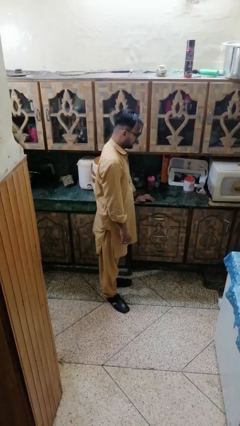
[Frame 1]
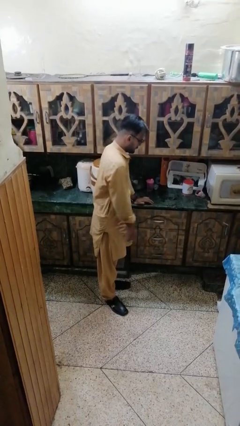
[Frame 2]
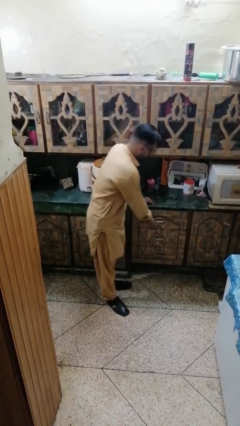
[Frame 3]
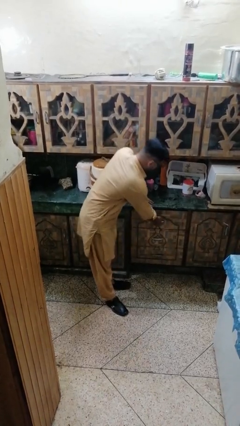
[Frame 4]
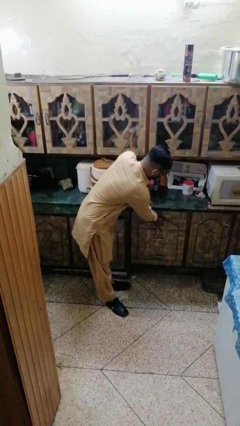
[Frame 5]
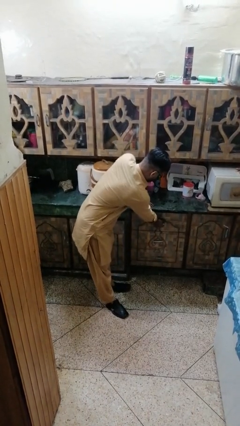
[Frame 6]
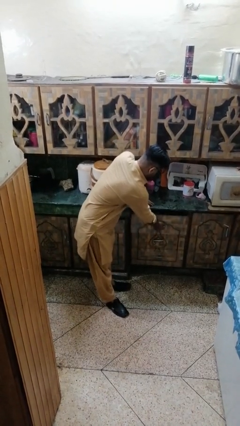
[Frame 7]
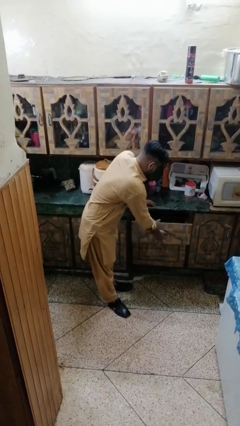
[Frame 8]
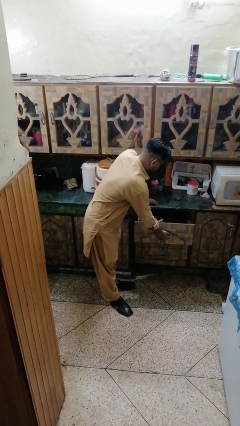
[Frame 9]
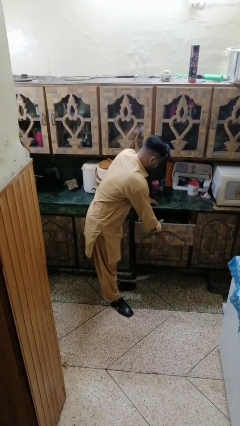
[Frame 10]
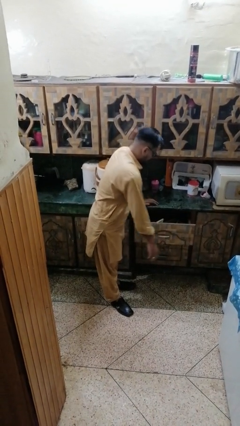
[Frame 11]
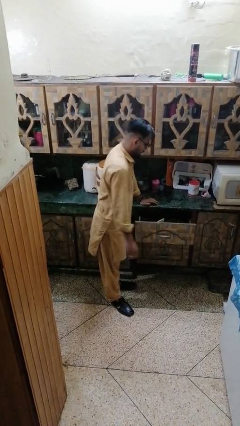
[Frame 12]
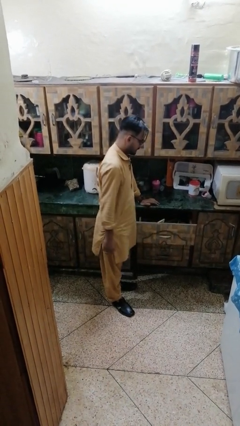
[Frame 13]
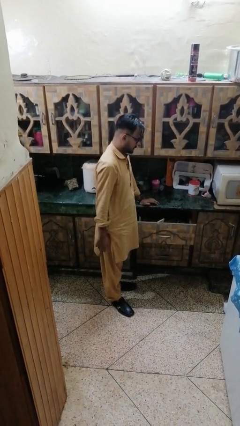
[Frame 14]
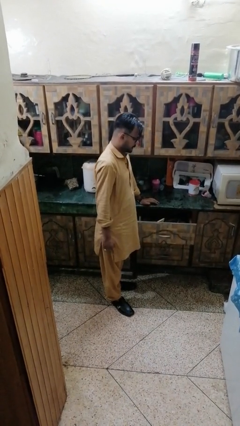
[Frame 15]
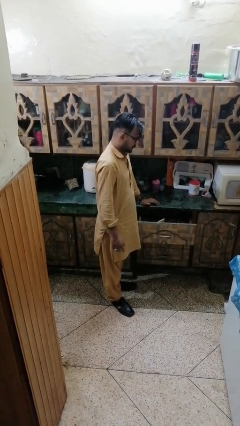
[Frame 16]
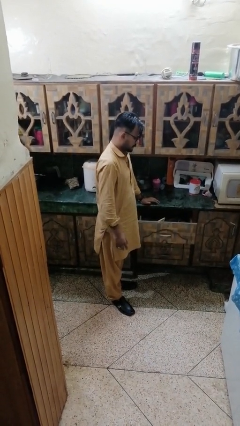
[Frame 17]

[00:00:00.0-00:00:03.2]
person opens kitchen drawer

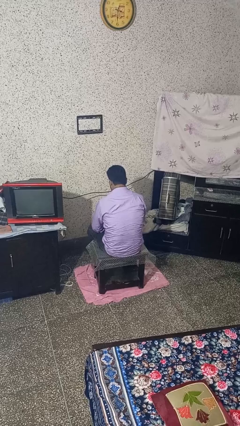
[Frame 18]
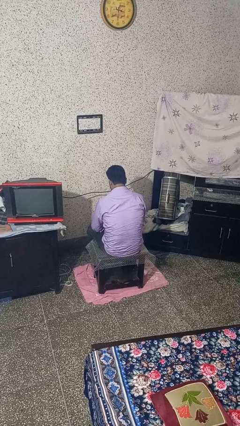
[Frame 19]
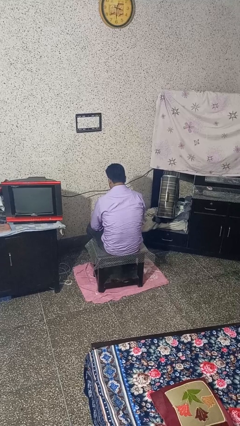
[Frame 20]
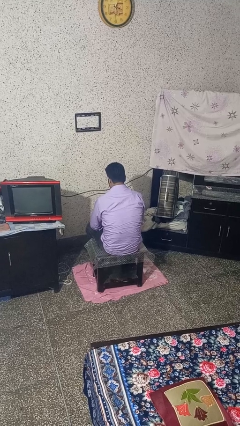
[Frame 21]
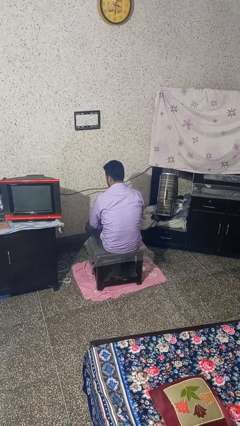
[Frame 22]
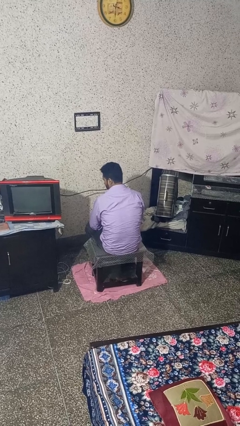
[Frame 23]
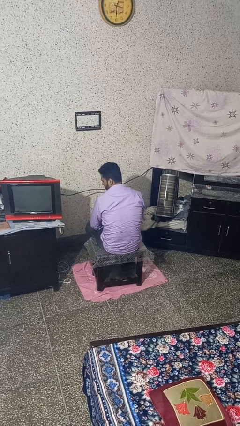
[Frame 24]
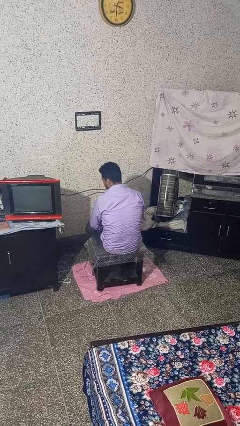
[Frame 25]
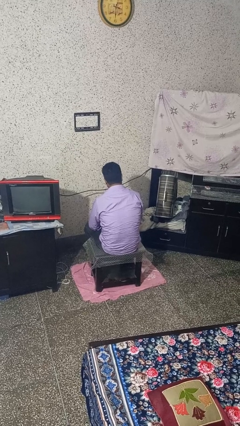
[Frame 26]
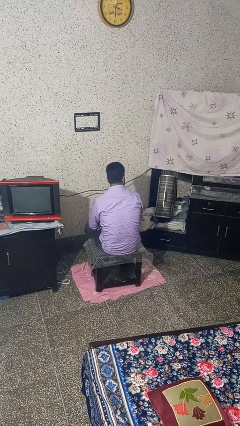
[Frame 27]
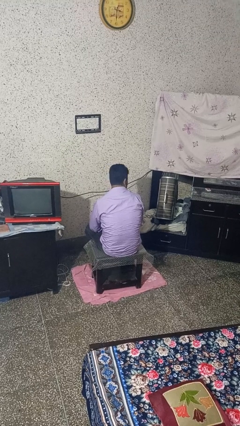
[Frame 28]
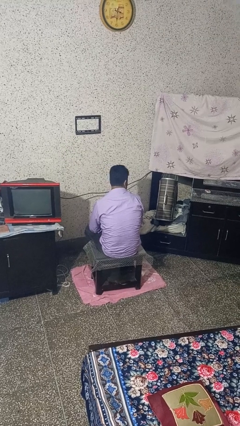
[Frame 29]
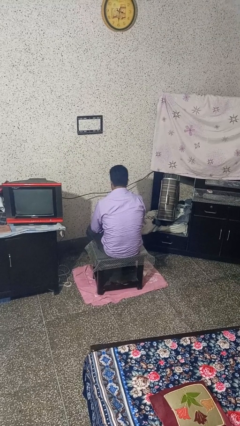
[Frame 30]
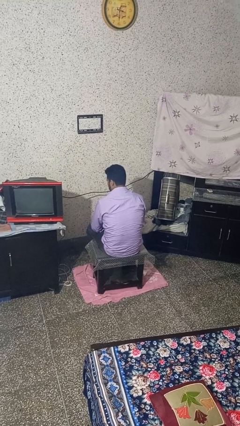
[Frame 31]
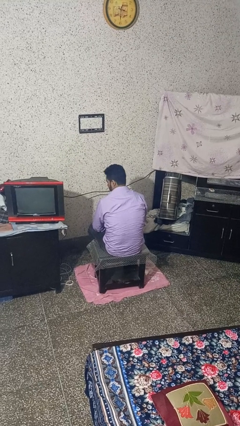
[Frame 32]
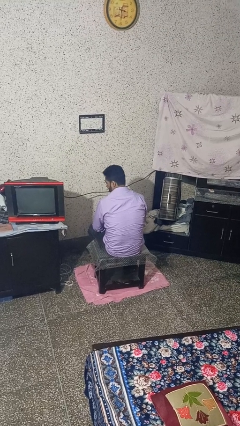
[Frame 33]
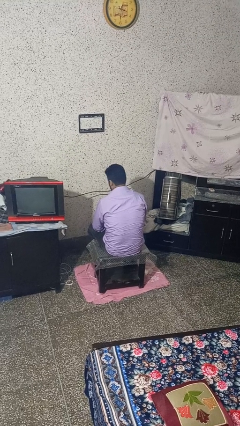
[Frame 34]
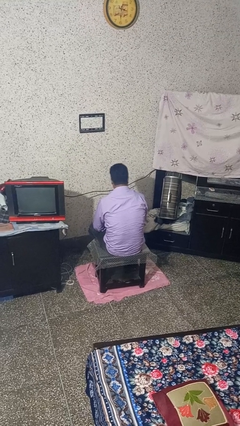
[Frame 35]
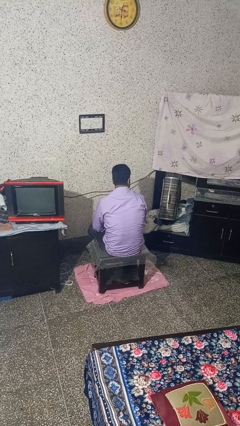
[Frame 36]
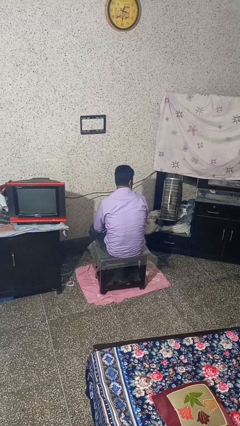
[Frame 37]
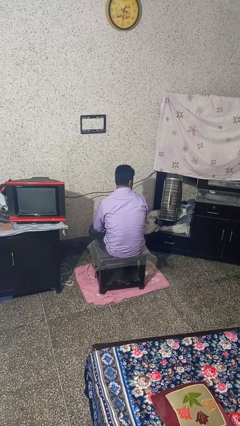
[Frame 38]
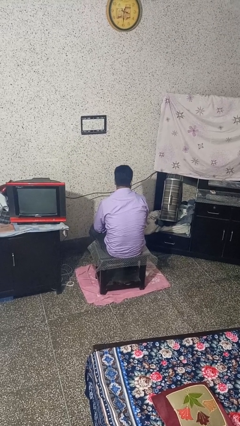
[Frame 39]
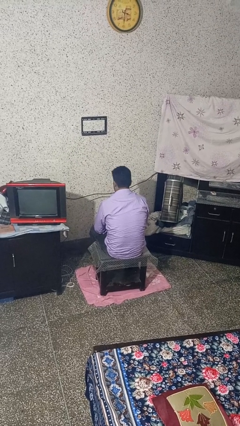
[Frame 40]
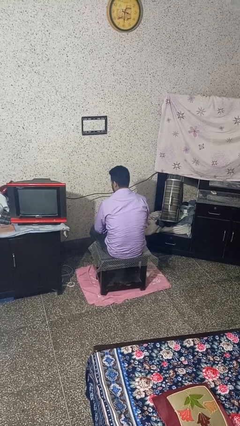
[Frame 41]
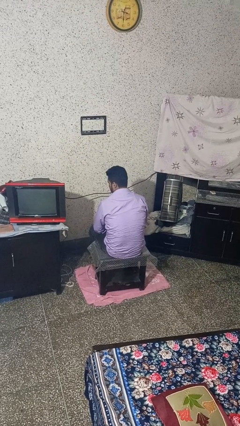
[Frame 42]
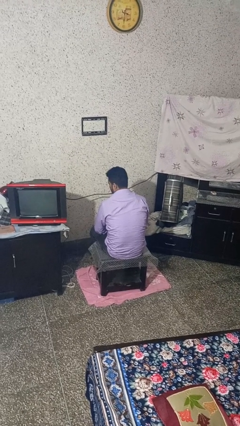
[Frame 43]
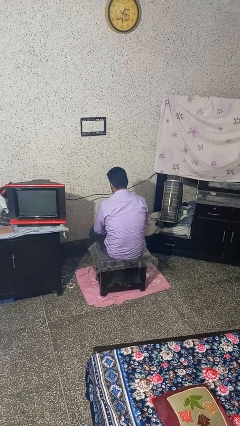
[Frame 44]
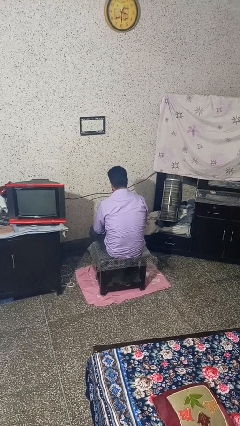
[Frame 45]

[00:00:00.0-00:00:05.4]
person shakes head

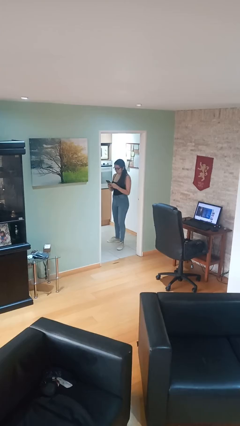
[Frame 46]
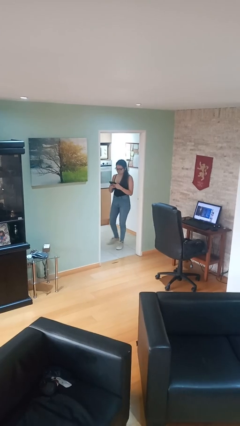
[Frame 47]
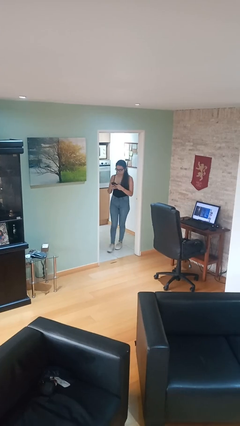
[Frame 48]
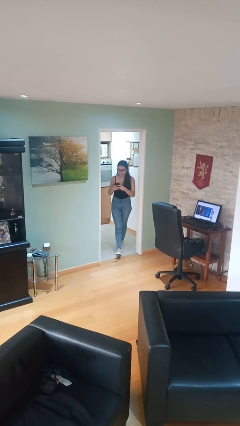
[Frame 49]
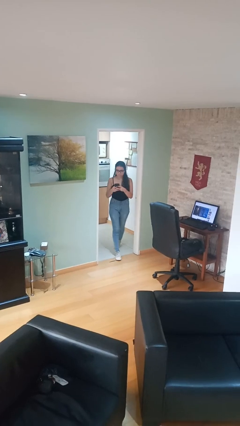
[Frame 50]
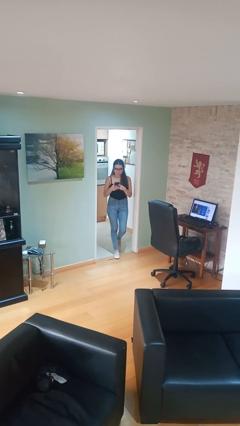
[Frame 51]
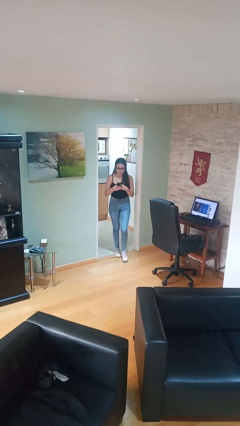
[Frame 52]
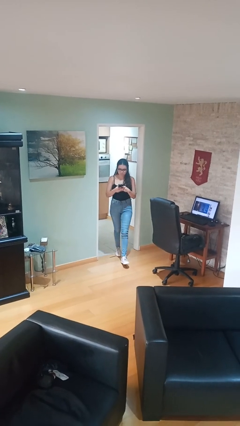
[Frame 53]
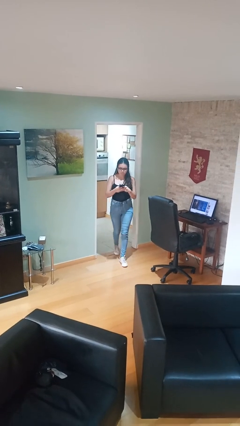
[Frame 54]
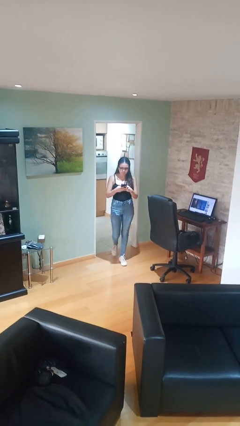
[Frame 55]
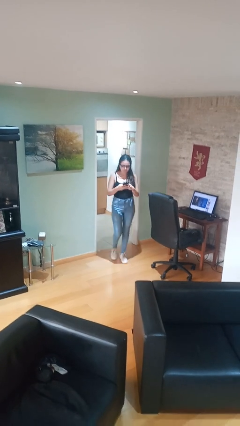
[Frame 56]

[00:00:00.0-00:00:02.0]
person enters scene through structure

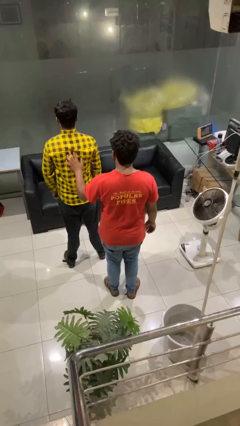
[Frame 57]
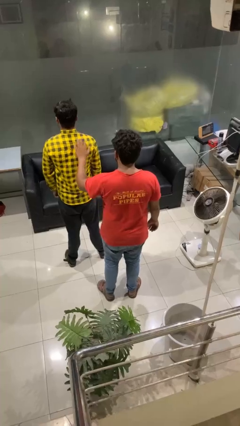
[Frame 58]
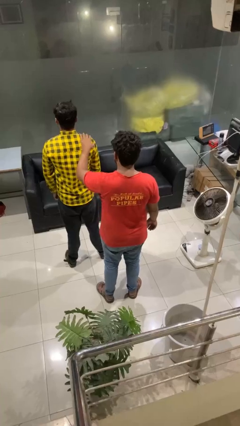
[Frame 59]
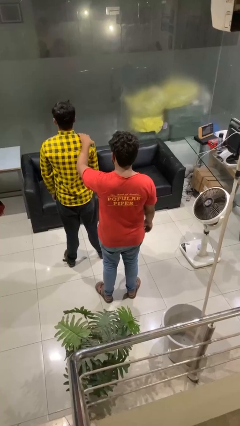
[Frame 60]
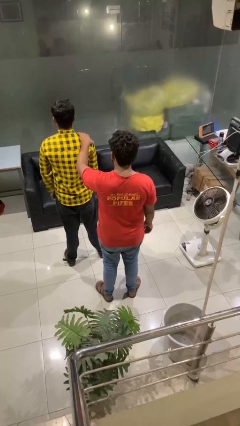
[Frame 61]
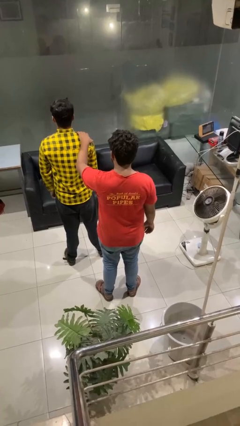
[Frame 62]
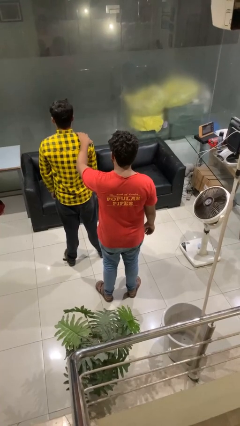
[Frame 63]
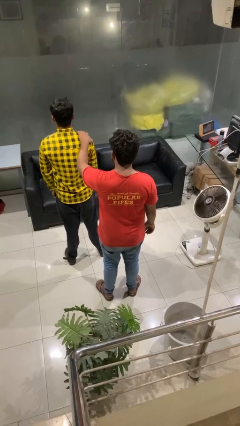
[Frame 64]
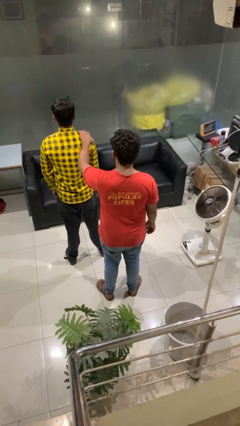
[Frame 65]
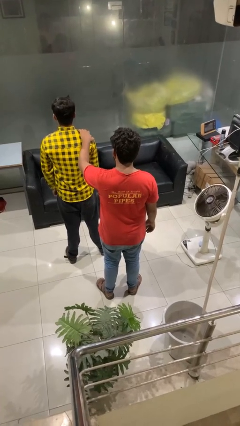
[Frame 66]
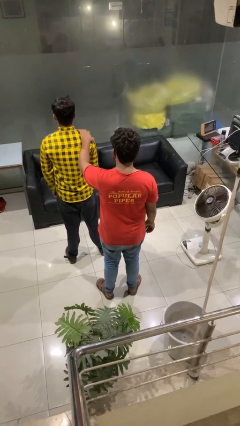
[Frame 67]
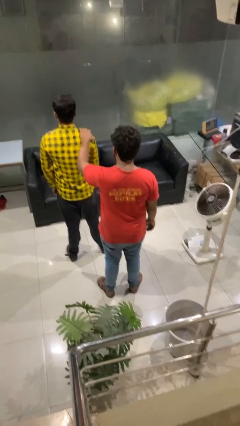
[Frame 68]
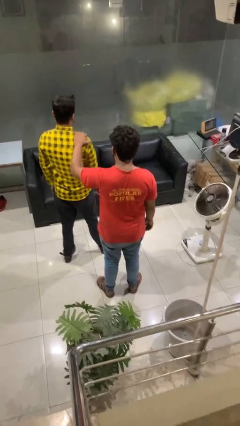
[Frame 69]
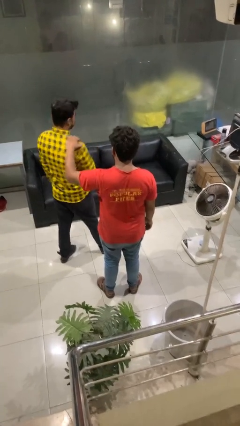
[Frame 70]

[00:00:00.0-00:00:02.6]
person grabs person by shoulder

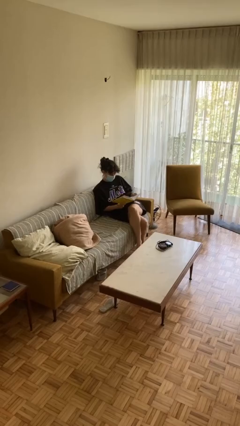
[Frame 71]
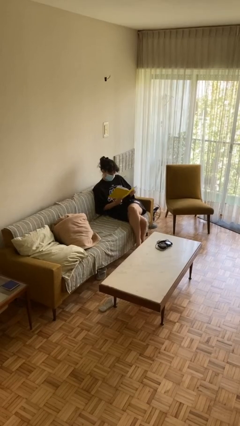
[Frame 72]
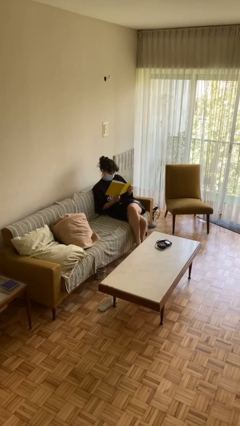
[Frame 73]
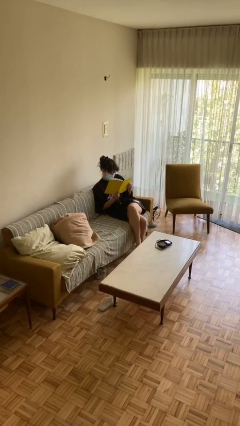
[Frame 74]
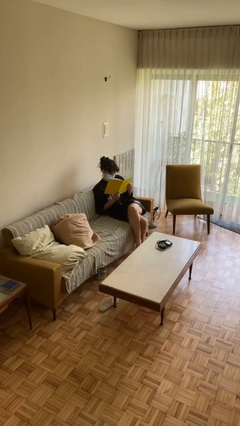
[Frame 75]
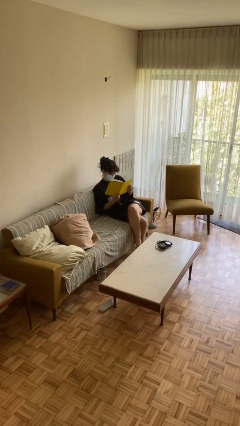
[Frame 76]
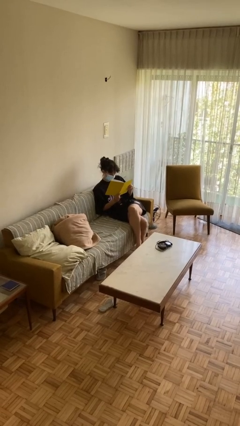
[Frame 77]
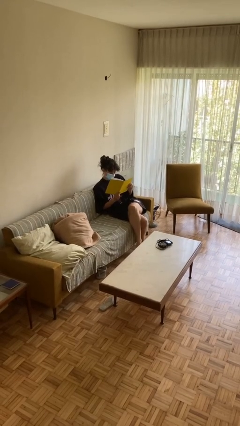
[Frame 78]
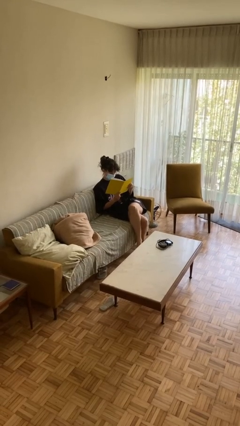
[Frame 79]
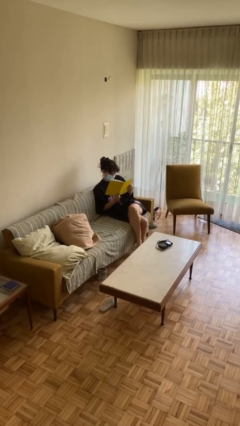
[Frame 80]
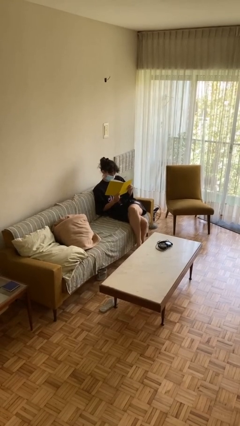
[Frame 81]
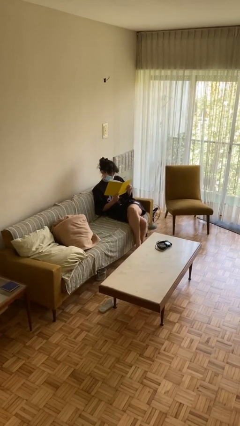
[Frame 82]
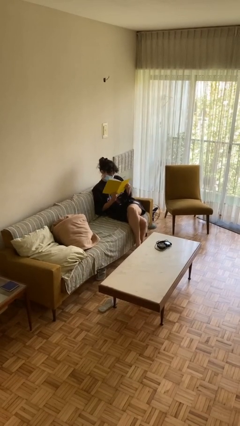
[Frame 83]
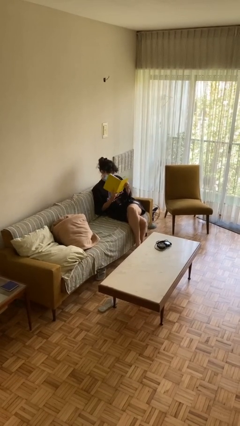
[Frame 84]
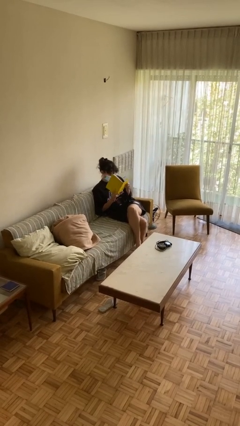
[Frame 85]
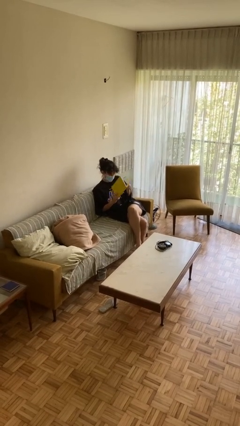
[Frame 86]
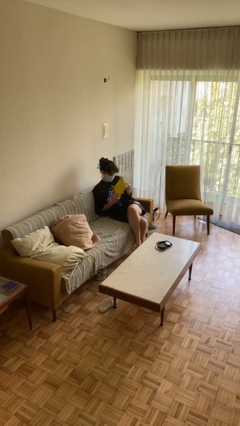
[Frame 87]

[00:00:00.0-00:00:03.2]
person reads document

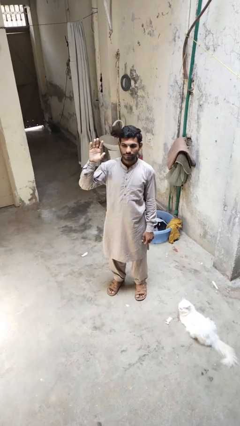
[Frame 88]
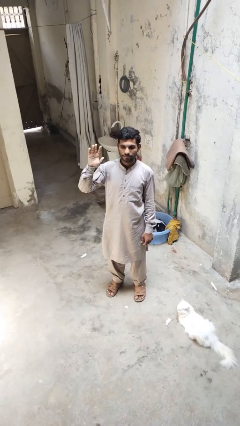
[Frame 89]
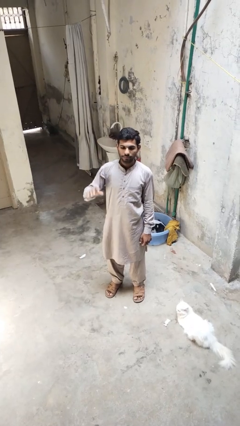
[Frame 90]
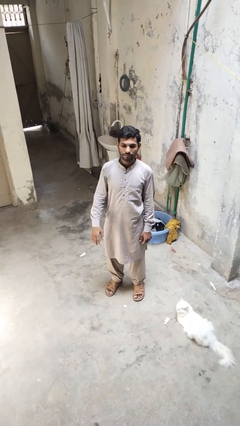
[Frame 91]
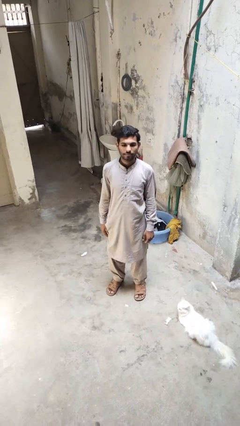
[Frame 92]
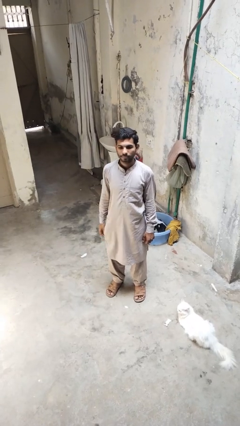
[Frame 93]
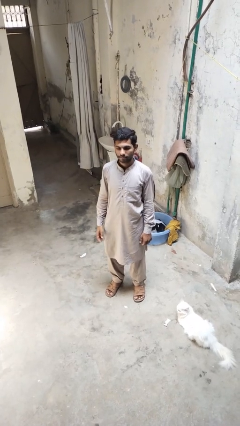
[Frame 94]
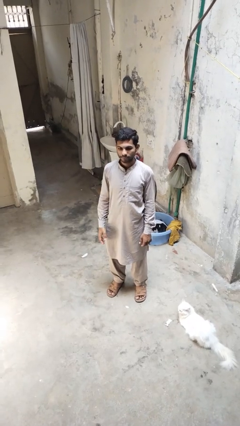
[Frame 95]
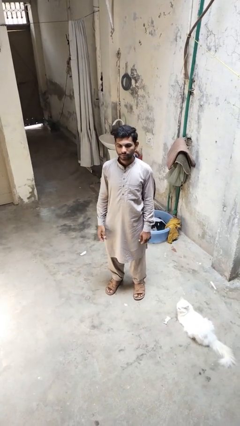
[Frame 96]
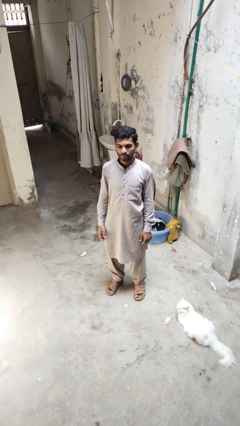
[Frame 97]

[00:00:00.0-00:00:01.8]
person gestures lower hand
